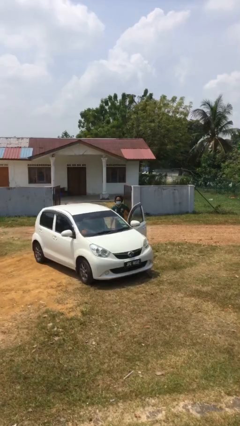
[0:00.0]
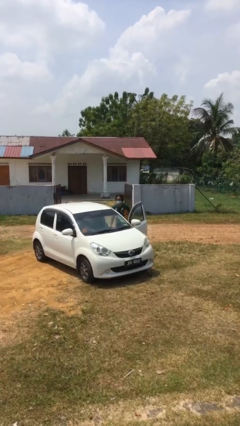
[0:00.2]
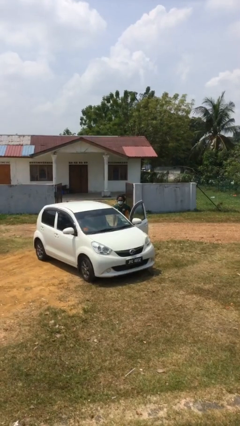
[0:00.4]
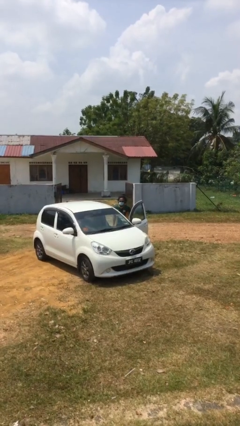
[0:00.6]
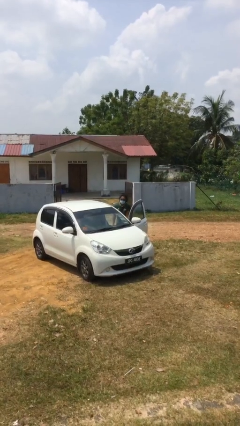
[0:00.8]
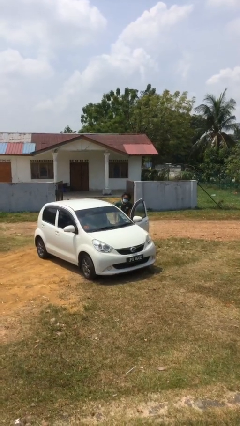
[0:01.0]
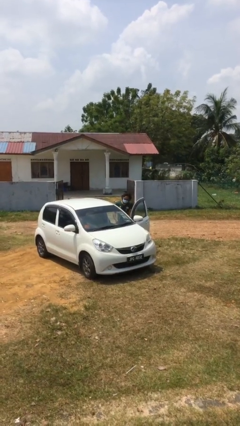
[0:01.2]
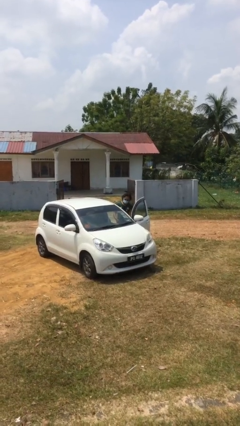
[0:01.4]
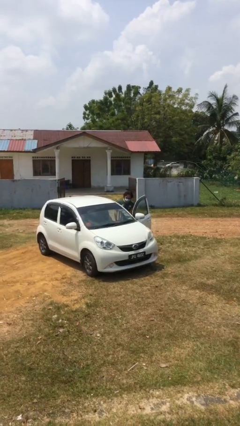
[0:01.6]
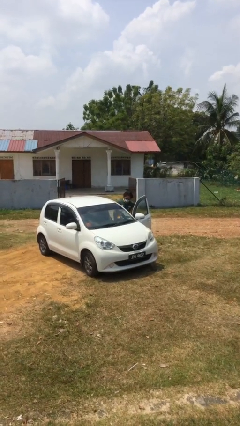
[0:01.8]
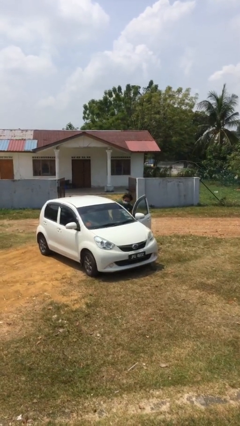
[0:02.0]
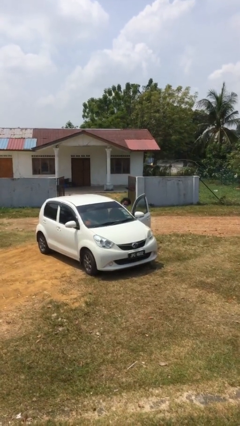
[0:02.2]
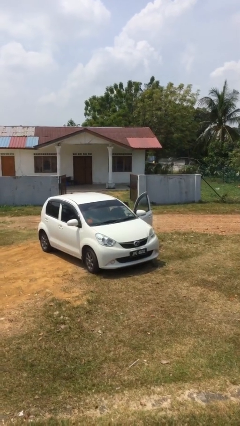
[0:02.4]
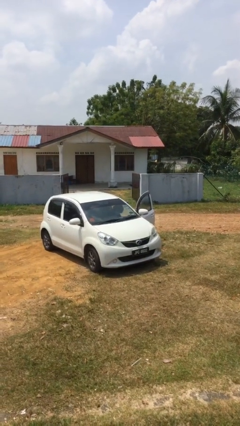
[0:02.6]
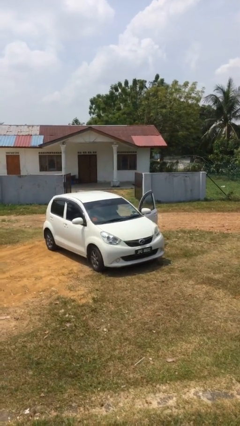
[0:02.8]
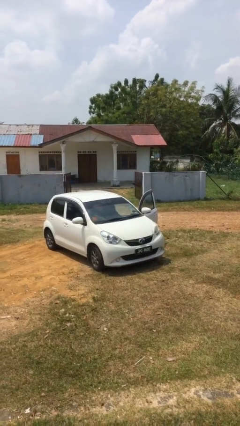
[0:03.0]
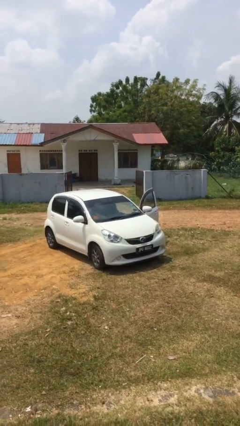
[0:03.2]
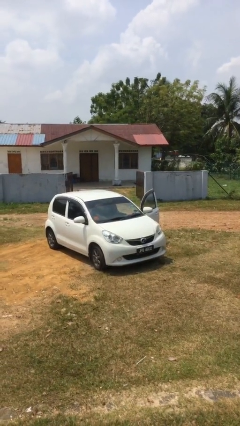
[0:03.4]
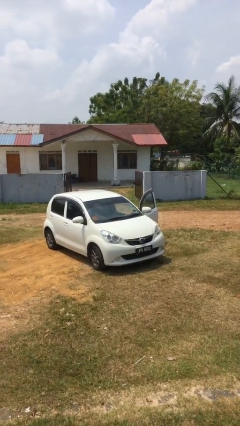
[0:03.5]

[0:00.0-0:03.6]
person enters car

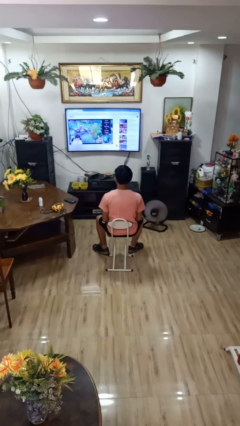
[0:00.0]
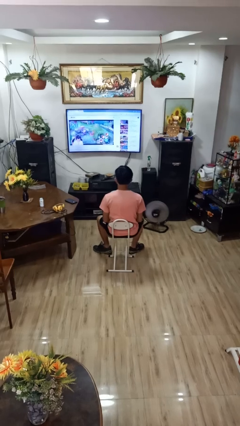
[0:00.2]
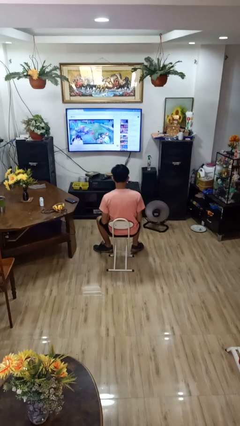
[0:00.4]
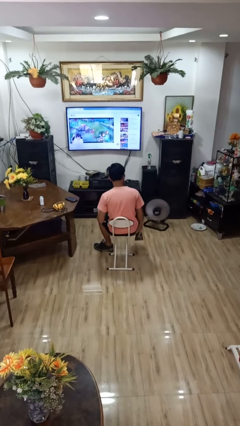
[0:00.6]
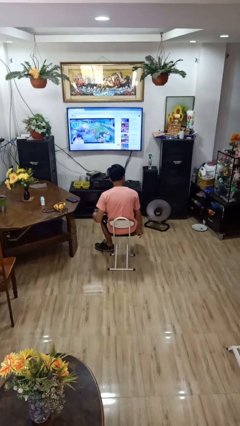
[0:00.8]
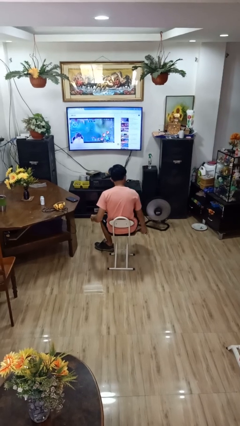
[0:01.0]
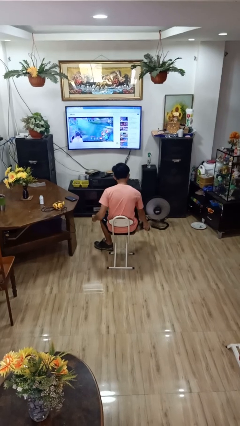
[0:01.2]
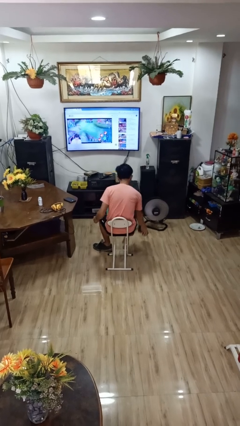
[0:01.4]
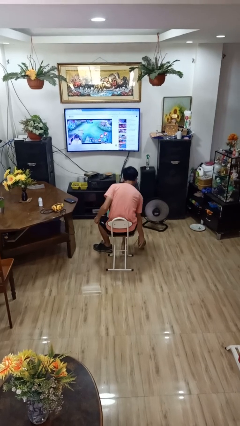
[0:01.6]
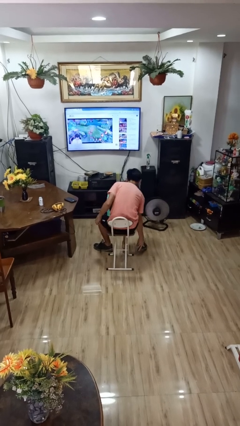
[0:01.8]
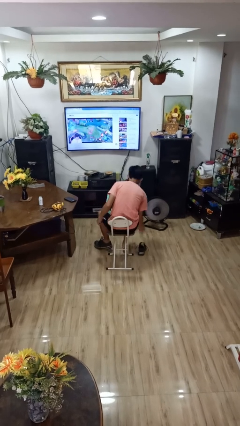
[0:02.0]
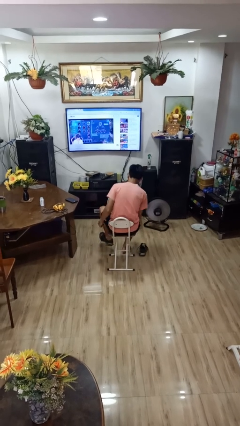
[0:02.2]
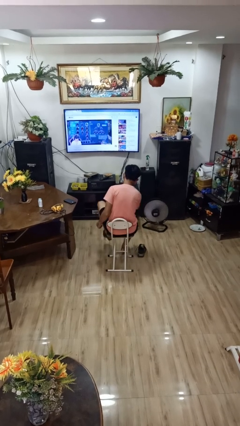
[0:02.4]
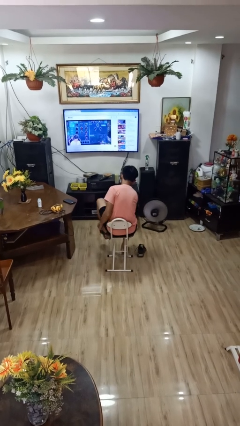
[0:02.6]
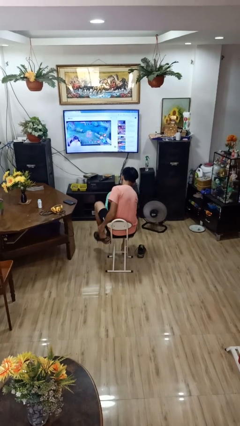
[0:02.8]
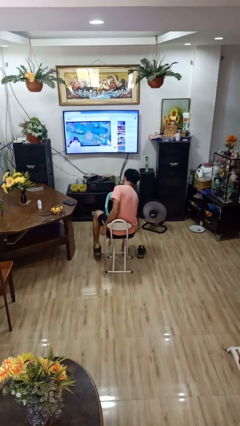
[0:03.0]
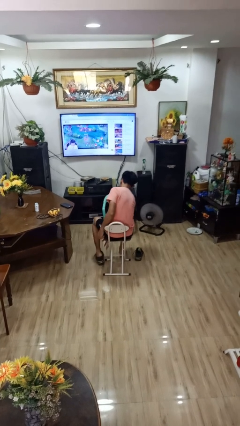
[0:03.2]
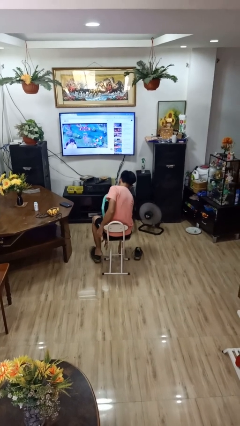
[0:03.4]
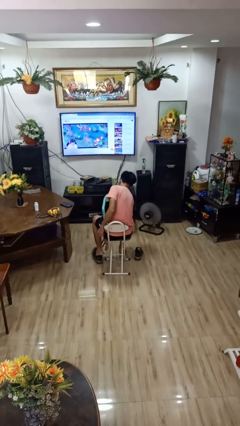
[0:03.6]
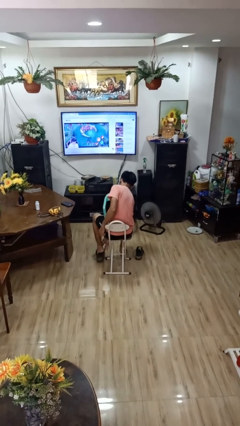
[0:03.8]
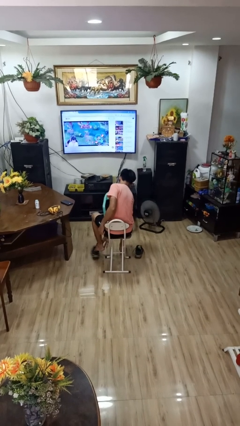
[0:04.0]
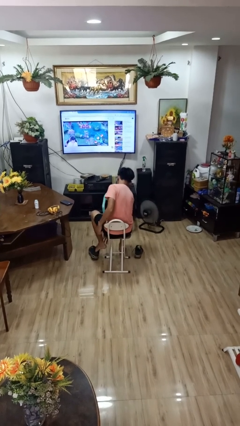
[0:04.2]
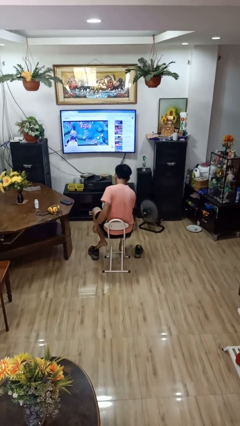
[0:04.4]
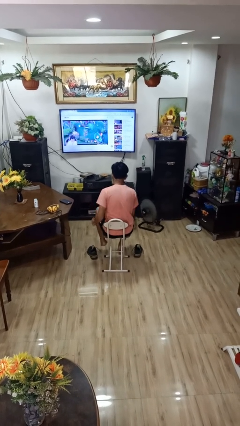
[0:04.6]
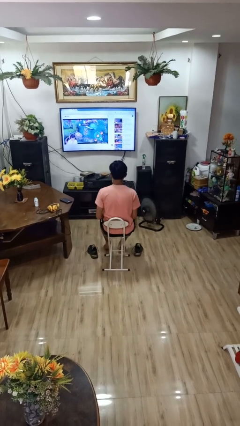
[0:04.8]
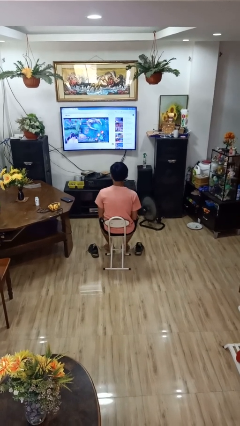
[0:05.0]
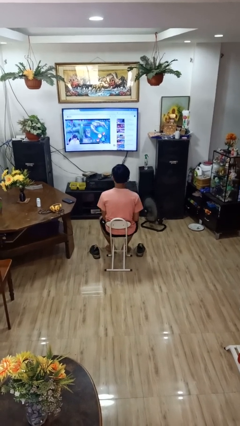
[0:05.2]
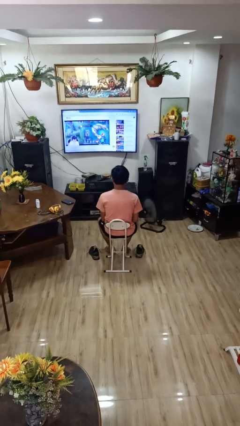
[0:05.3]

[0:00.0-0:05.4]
person takes off shoes

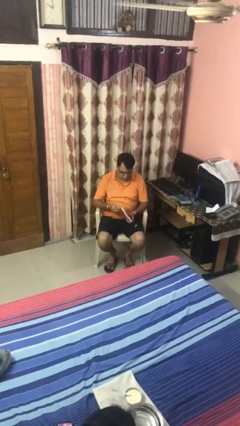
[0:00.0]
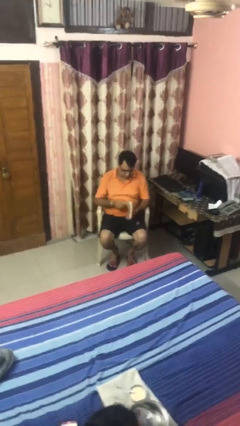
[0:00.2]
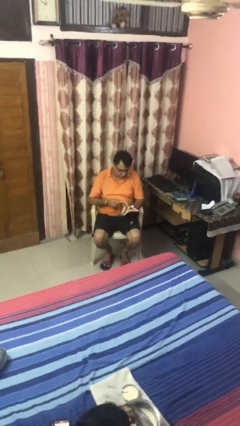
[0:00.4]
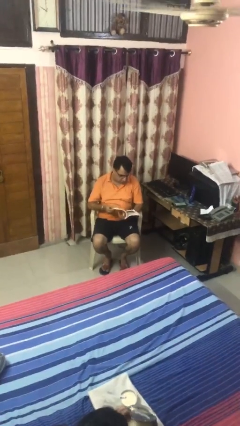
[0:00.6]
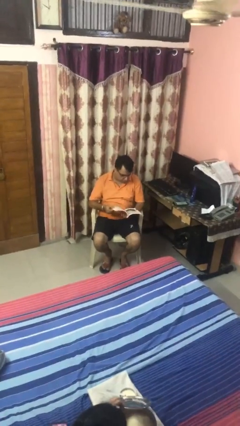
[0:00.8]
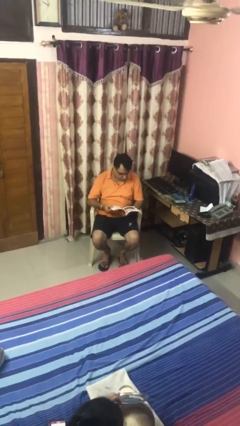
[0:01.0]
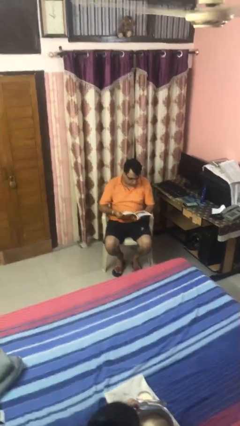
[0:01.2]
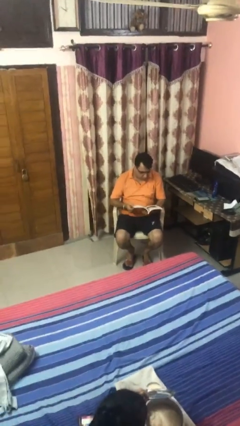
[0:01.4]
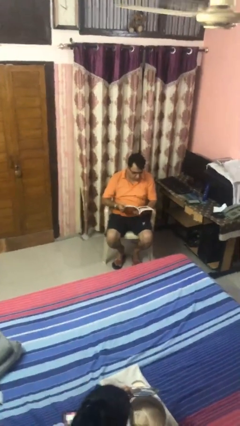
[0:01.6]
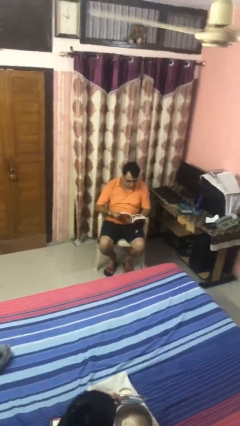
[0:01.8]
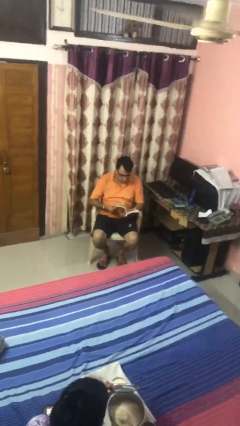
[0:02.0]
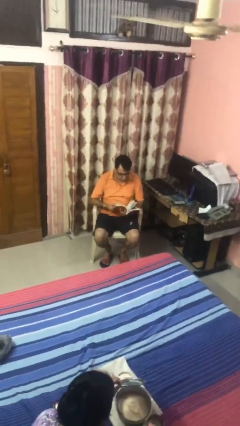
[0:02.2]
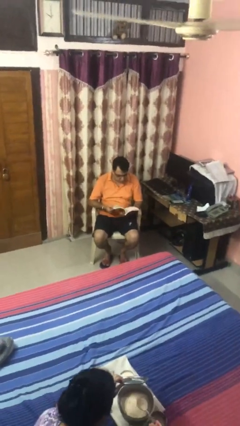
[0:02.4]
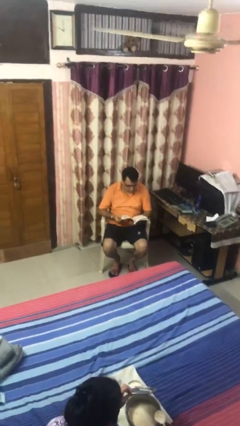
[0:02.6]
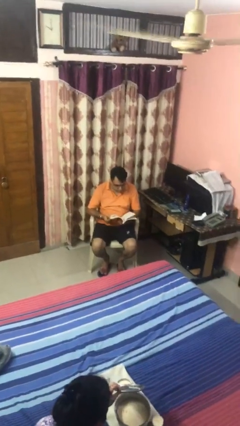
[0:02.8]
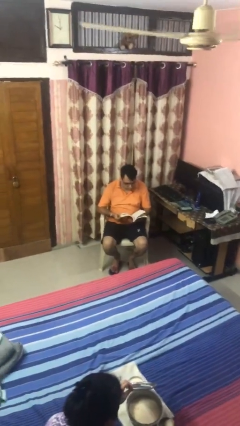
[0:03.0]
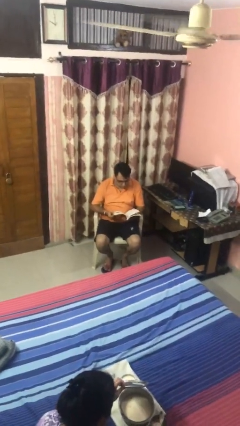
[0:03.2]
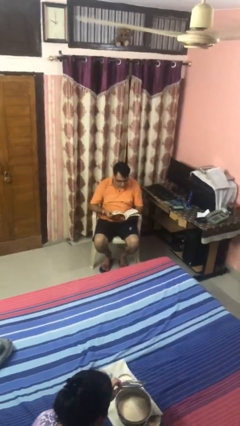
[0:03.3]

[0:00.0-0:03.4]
person reads book

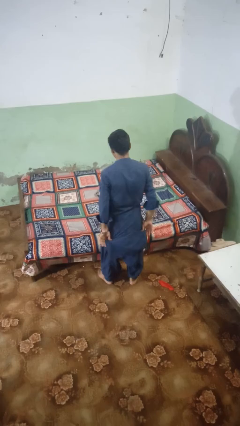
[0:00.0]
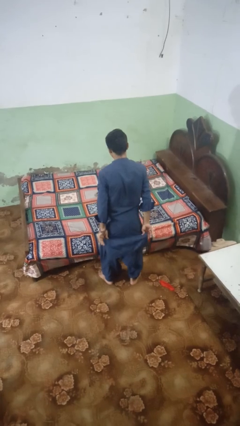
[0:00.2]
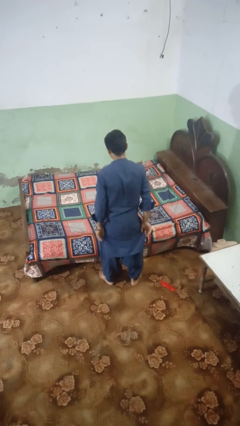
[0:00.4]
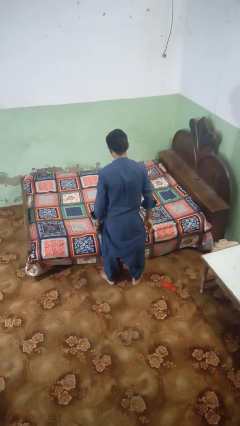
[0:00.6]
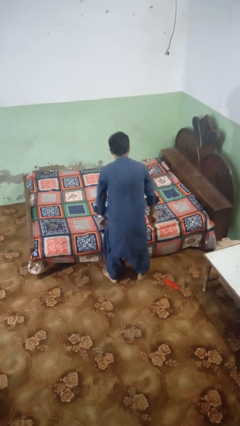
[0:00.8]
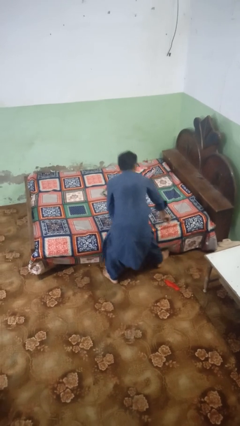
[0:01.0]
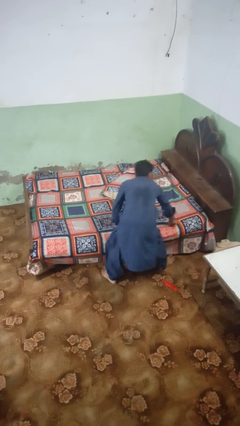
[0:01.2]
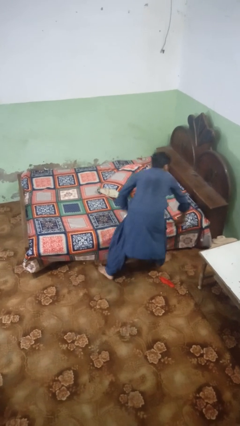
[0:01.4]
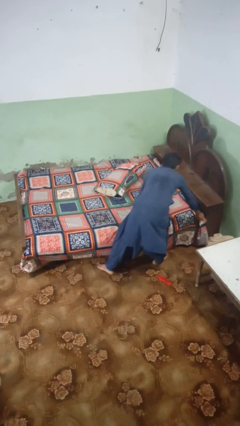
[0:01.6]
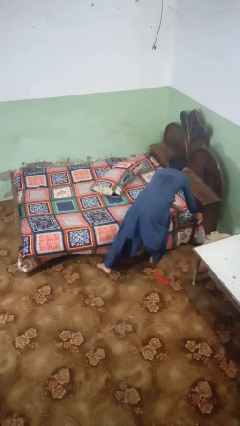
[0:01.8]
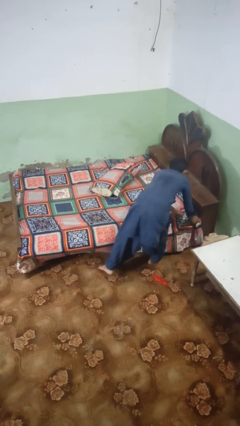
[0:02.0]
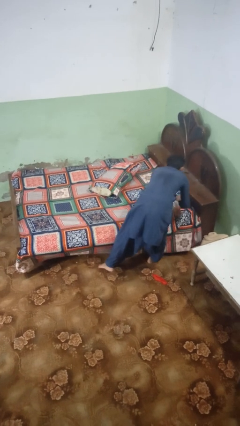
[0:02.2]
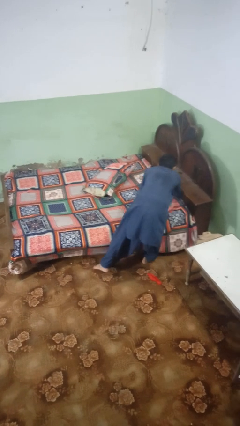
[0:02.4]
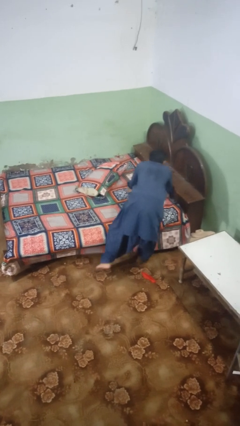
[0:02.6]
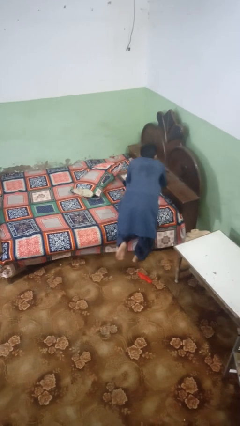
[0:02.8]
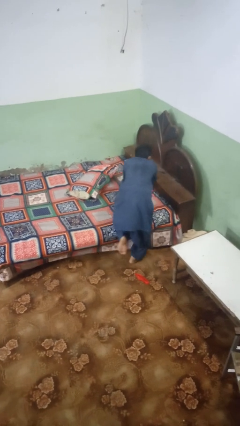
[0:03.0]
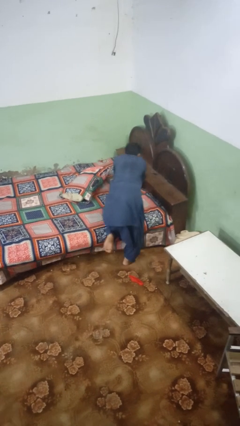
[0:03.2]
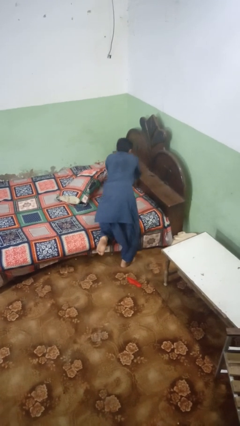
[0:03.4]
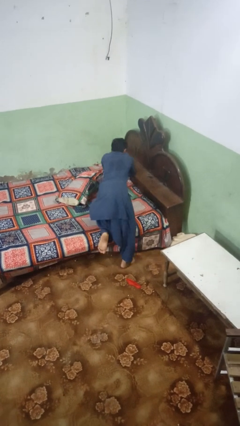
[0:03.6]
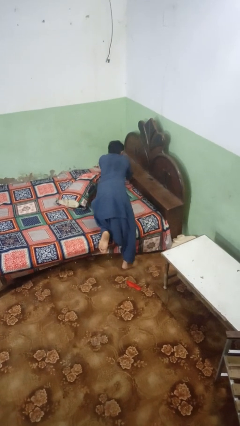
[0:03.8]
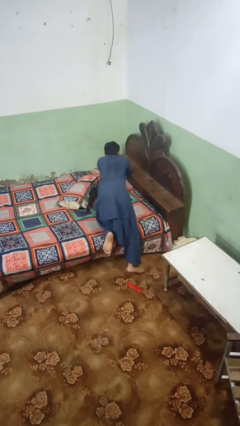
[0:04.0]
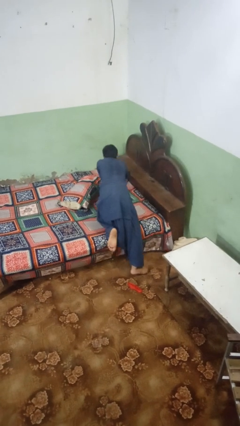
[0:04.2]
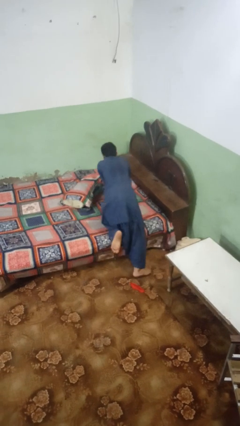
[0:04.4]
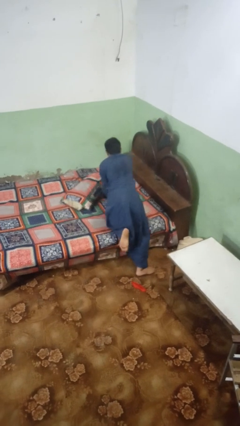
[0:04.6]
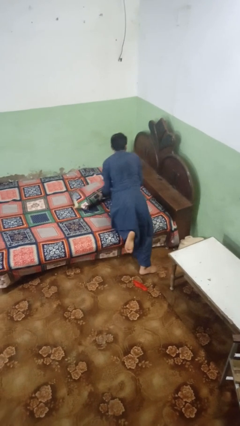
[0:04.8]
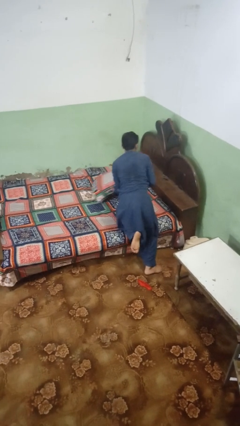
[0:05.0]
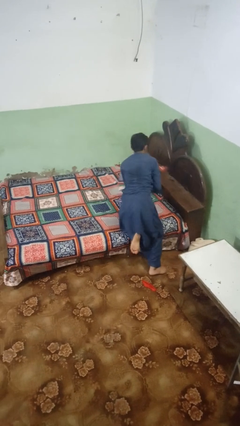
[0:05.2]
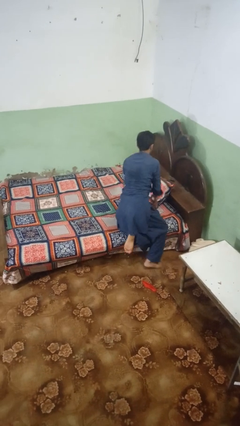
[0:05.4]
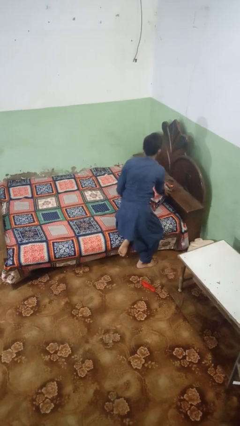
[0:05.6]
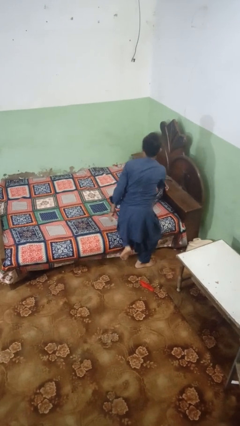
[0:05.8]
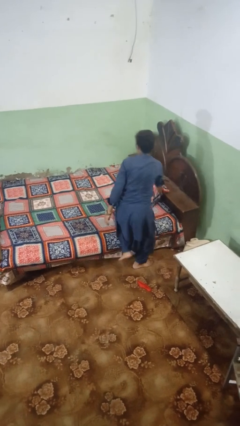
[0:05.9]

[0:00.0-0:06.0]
person makes bed
